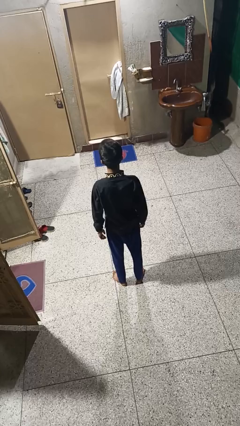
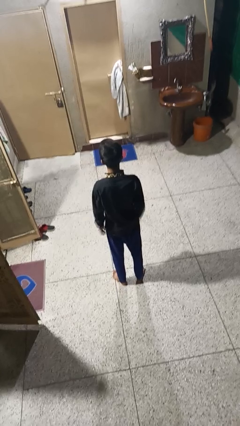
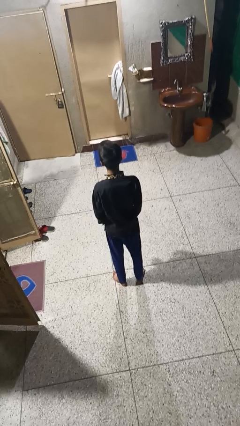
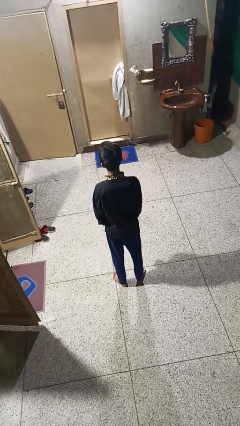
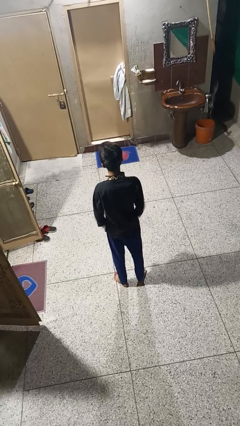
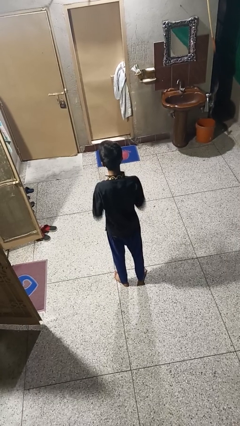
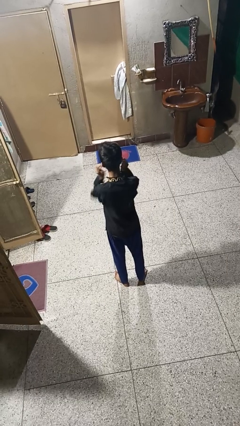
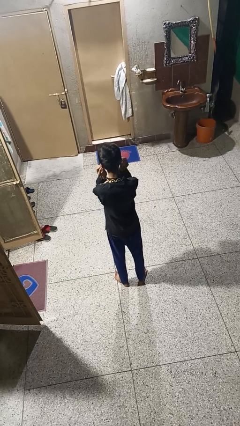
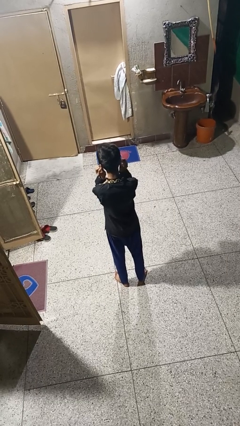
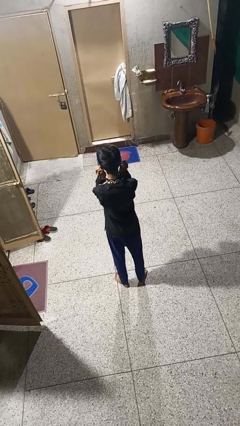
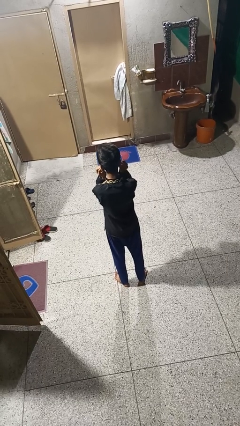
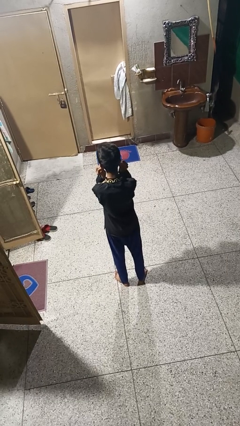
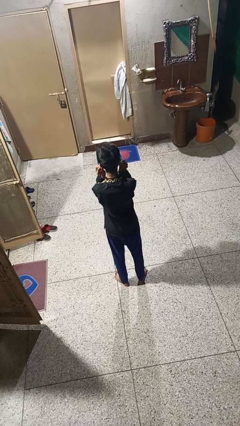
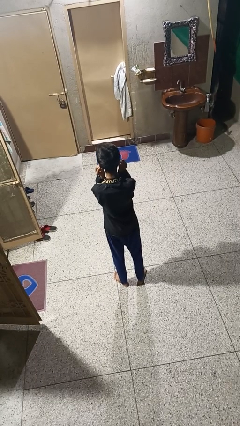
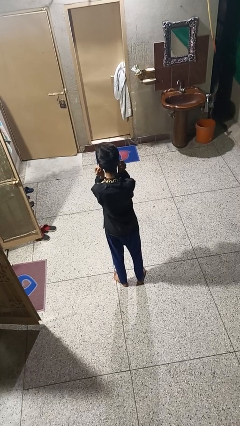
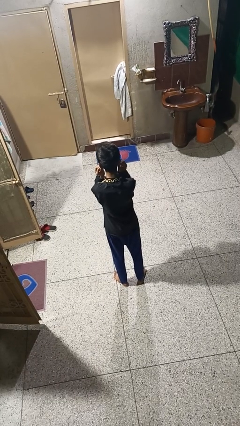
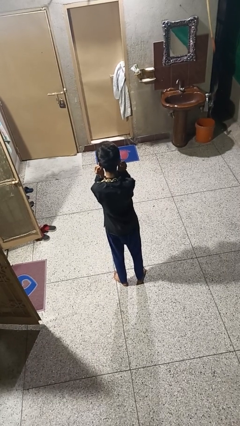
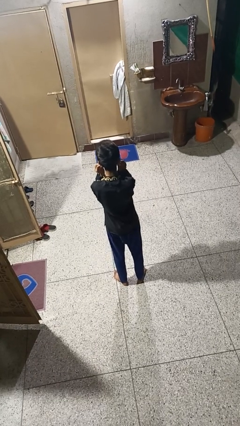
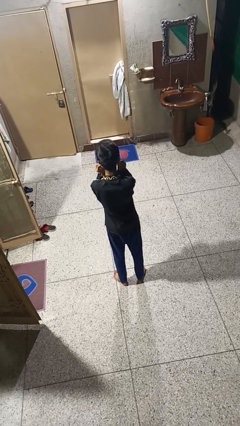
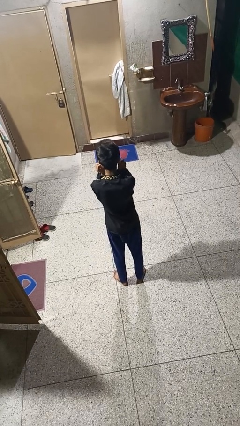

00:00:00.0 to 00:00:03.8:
person touches earlobe

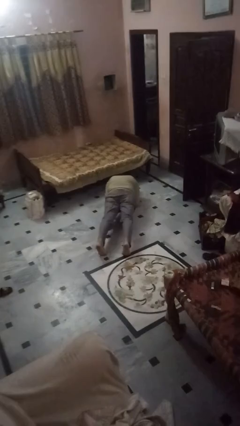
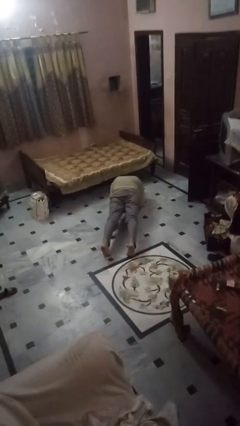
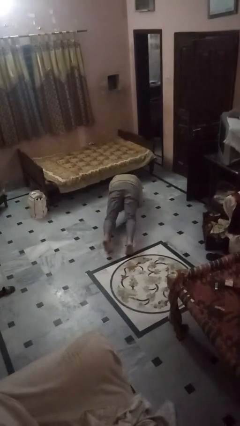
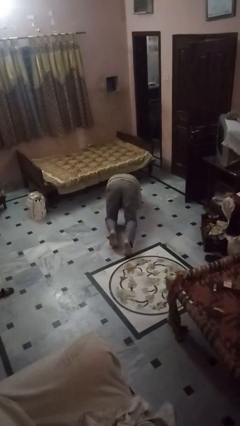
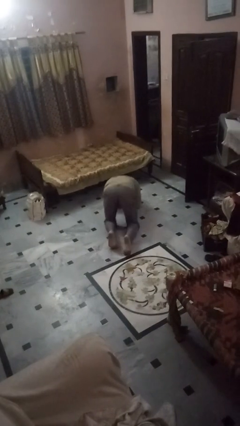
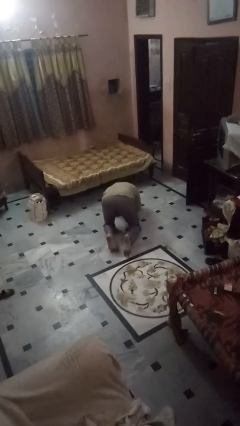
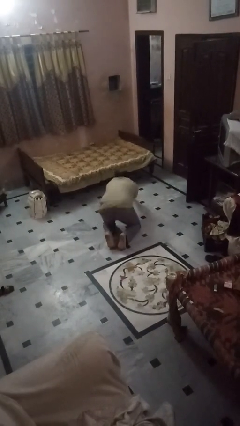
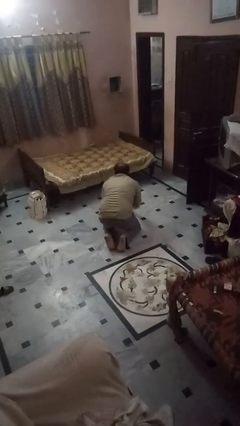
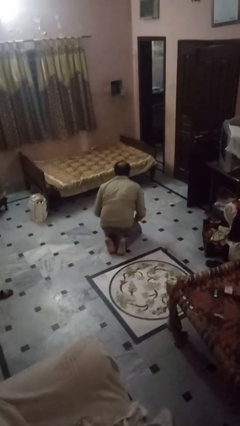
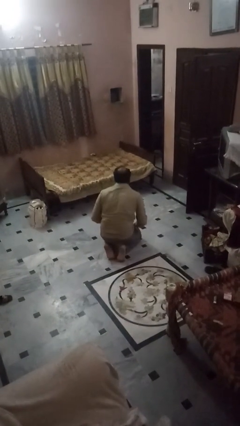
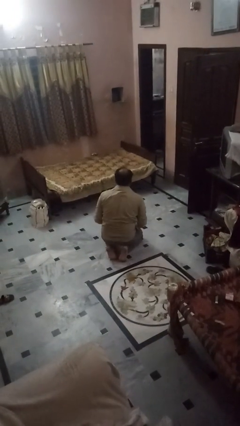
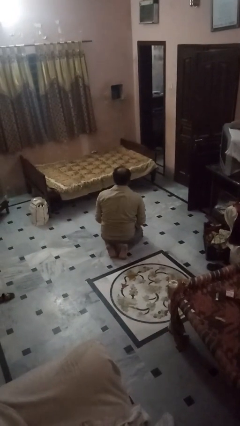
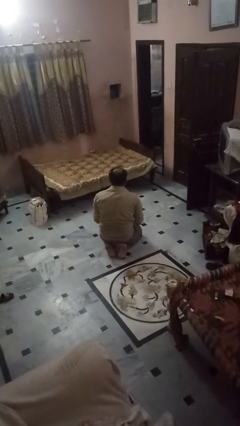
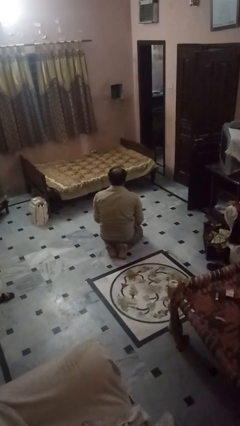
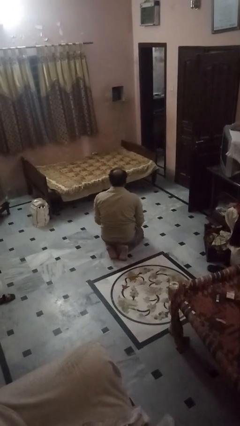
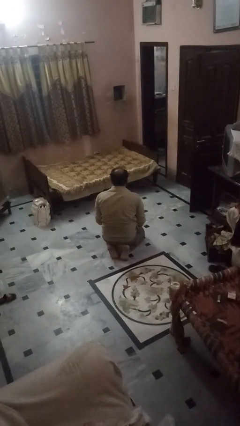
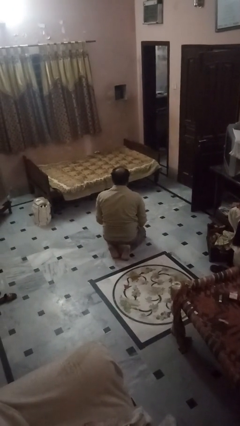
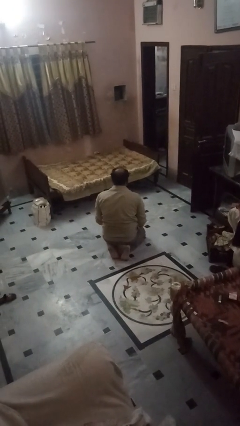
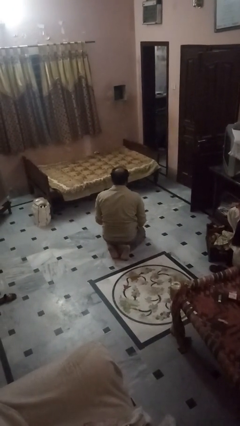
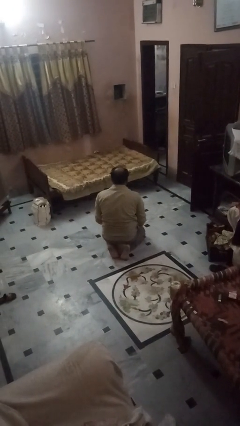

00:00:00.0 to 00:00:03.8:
person stands up from floor

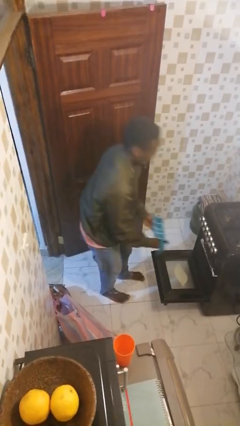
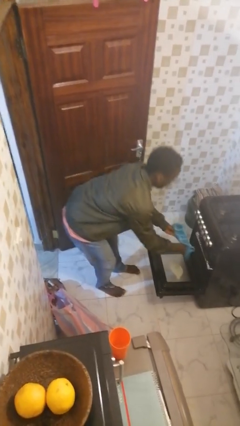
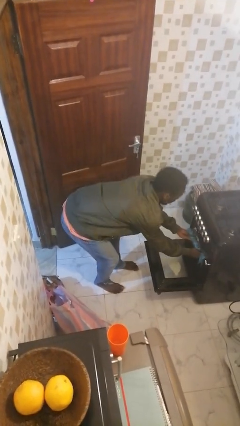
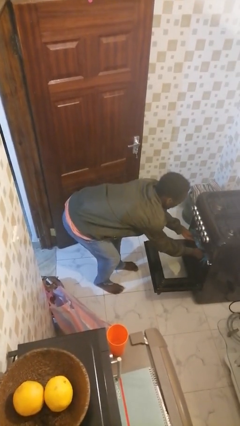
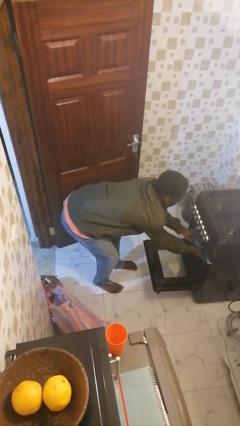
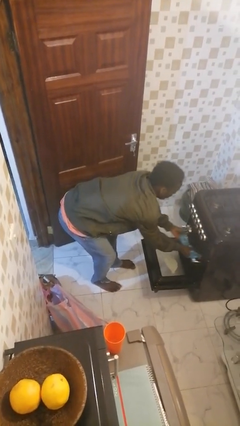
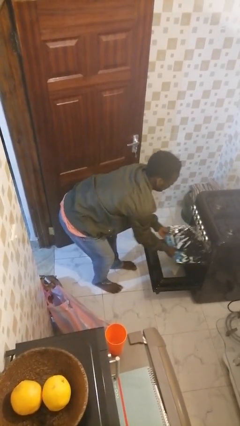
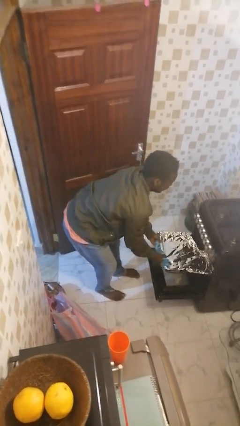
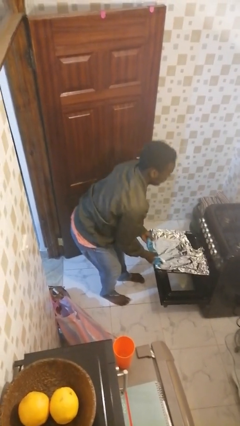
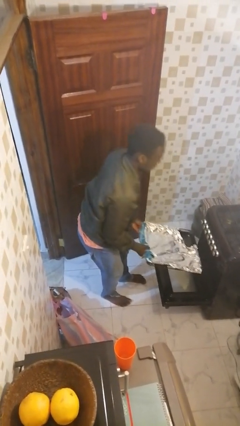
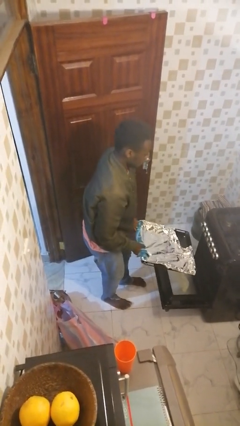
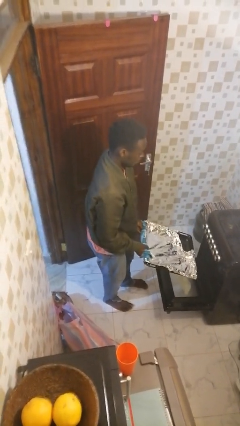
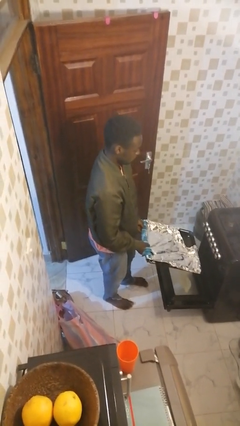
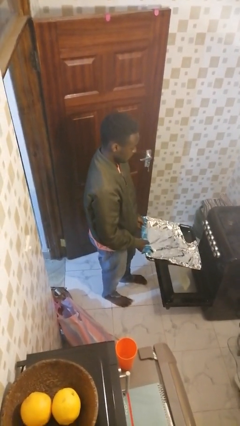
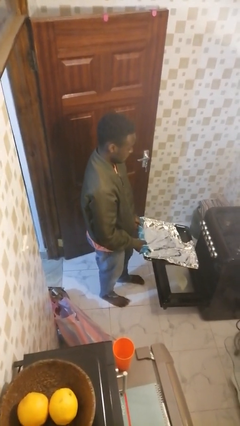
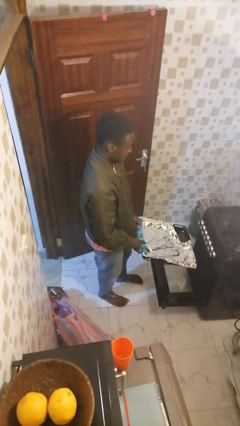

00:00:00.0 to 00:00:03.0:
person takes object from oven

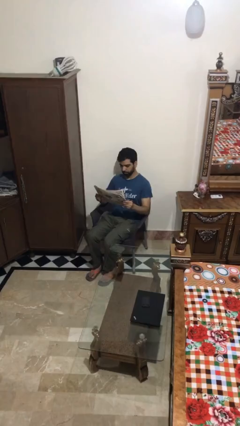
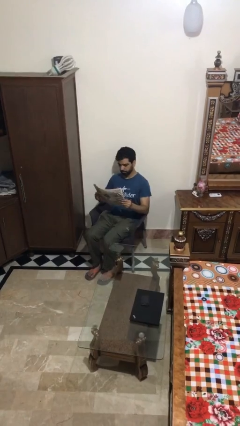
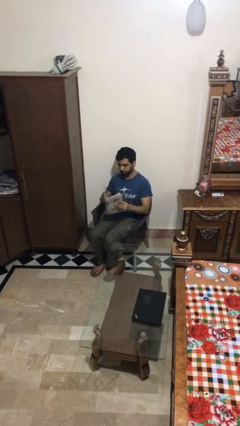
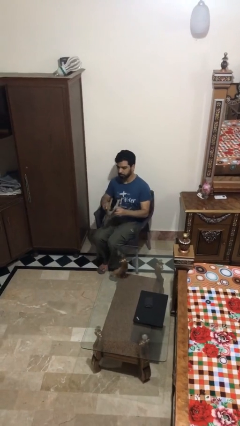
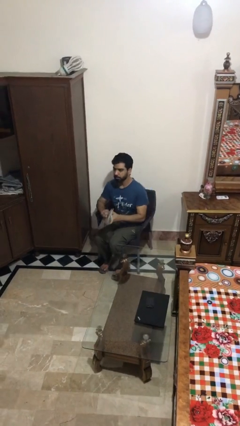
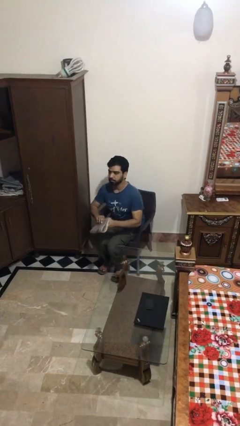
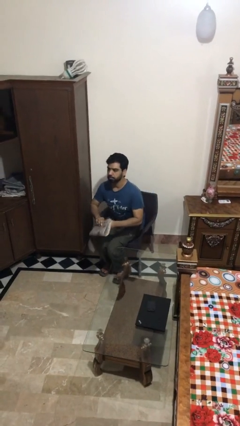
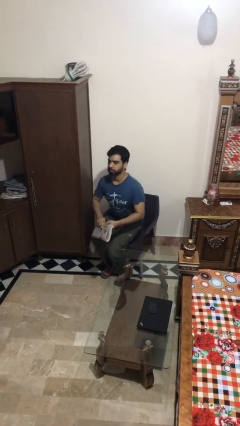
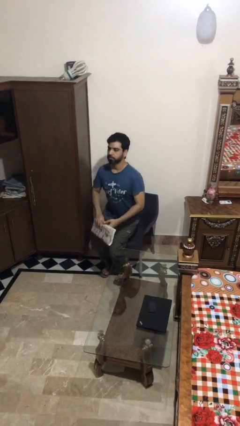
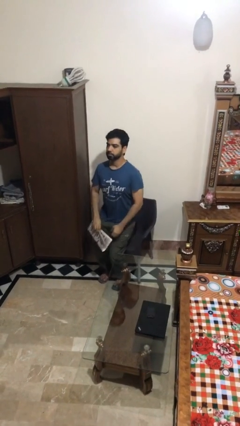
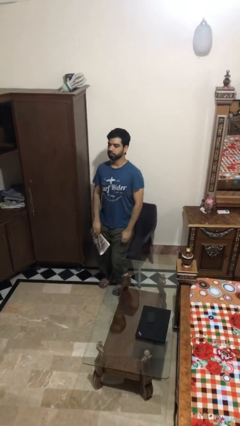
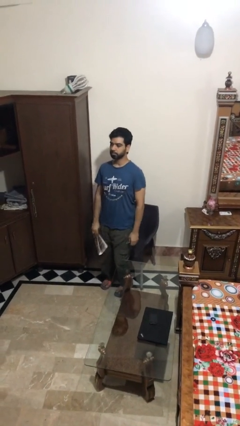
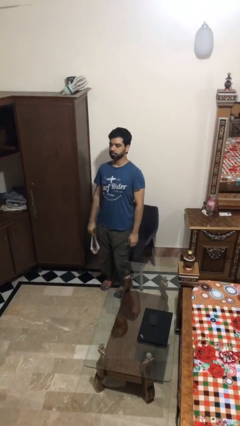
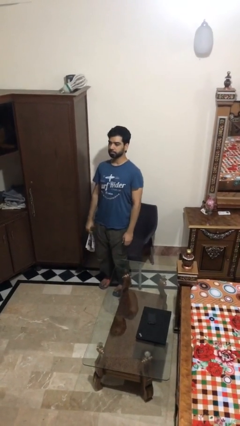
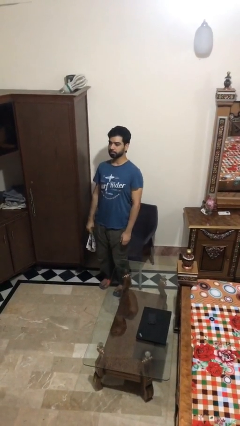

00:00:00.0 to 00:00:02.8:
person stands up

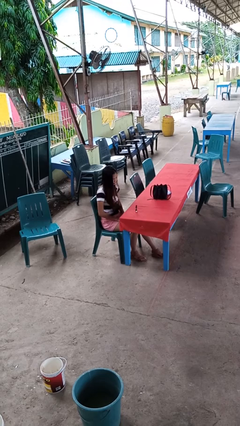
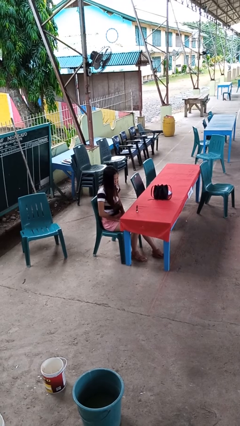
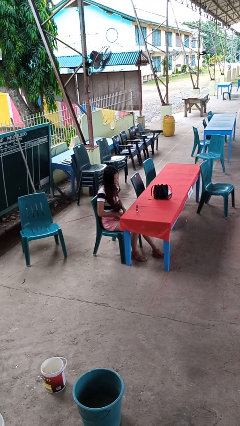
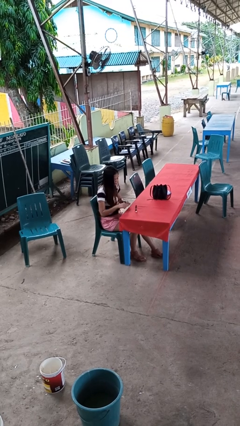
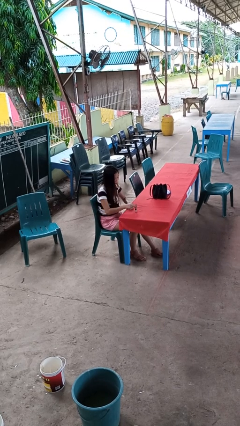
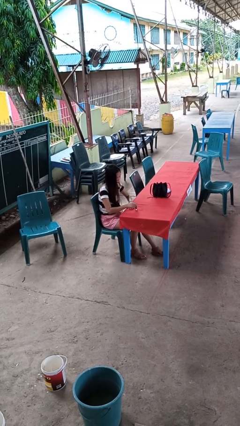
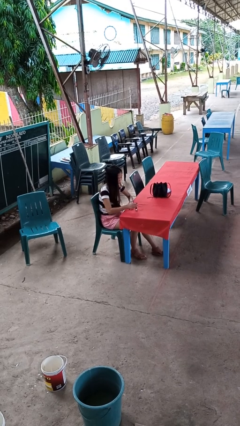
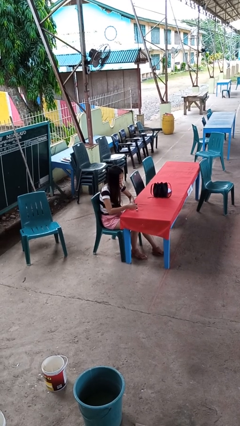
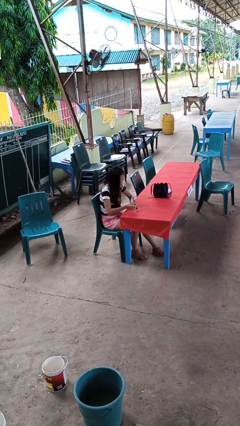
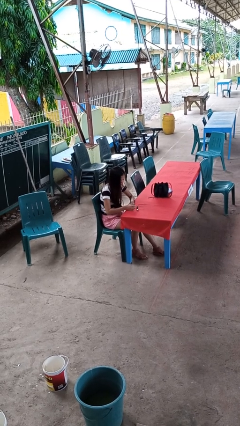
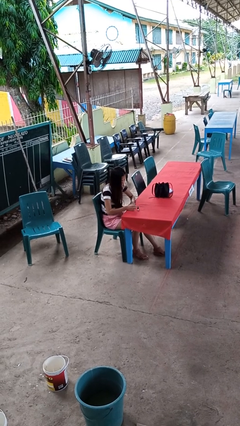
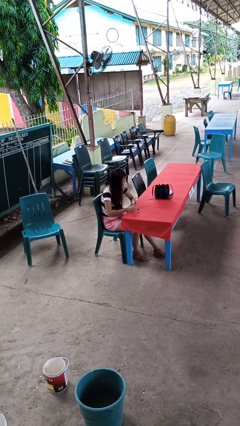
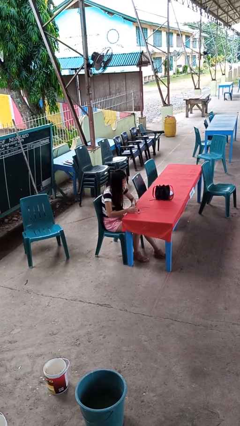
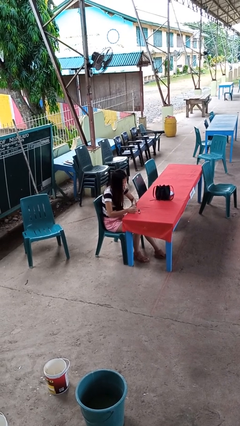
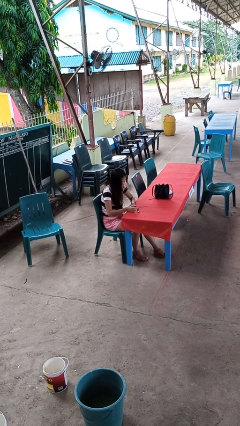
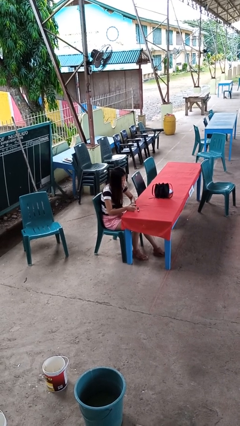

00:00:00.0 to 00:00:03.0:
person paints fingernails

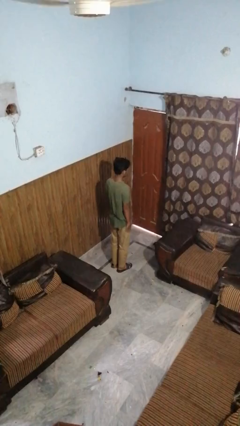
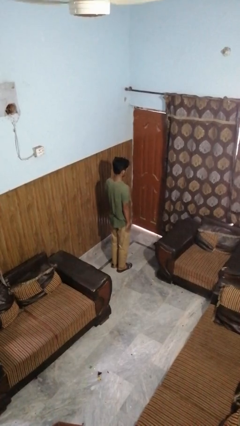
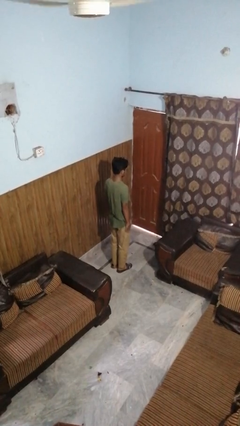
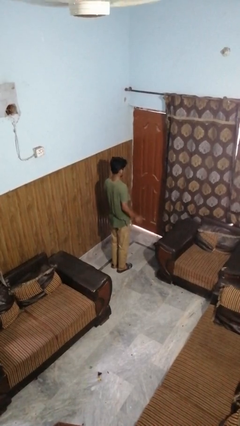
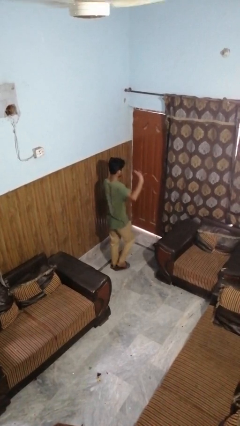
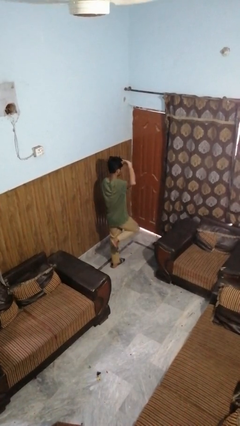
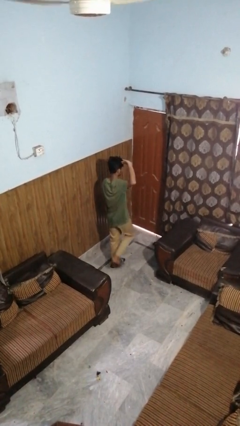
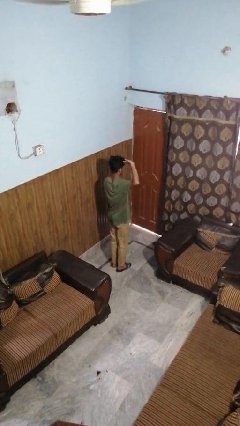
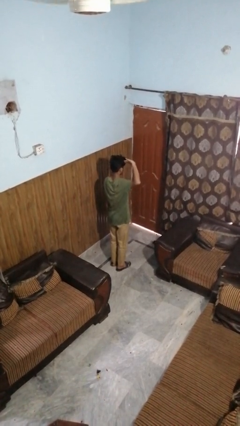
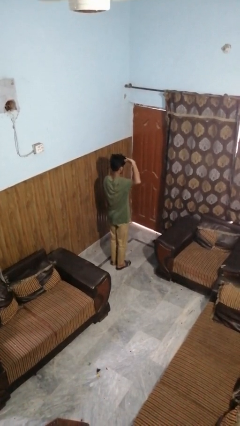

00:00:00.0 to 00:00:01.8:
person salutes
